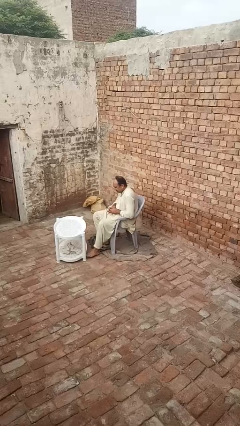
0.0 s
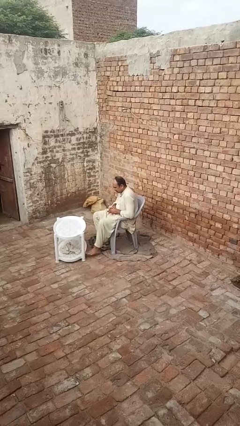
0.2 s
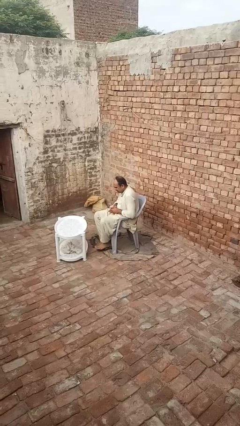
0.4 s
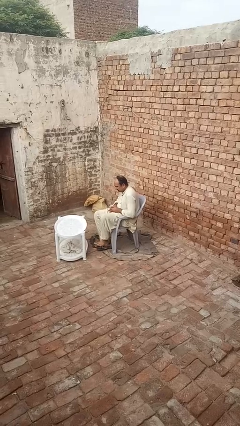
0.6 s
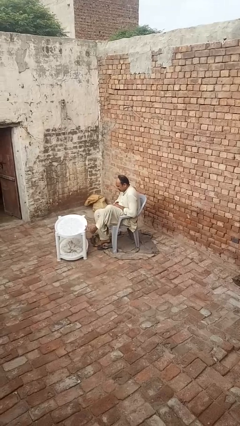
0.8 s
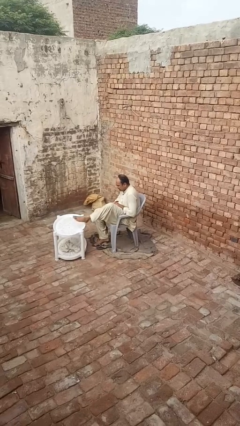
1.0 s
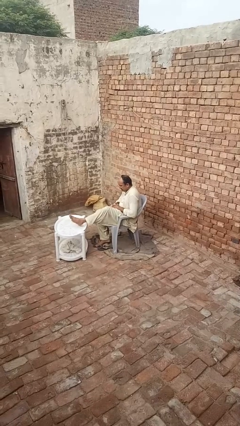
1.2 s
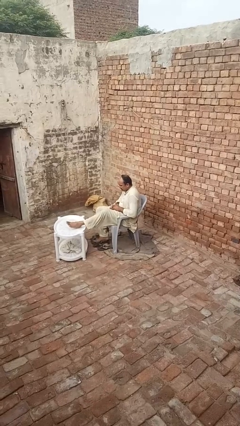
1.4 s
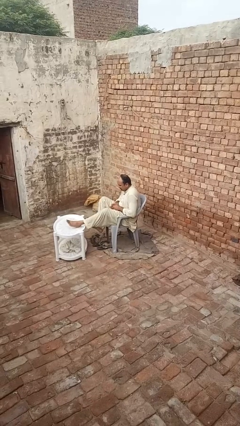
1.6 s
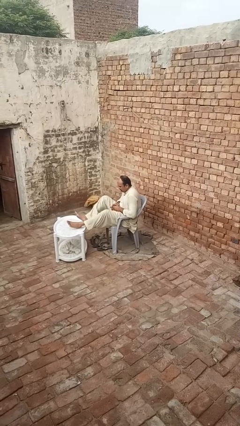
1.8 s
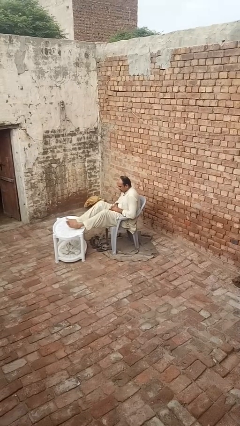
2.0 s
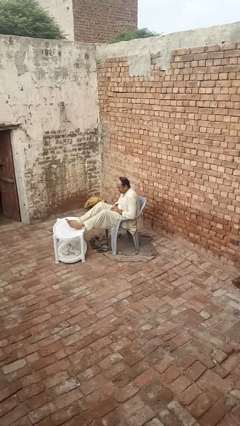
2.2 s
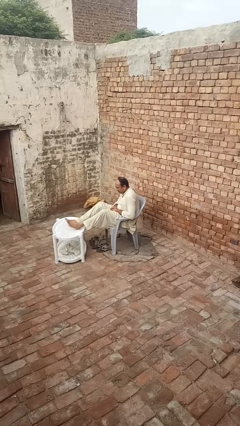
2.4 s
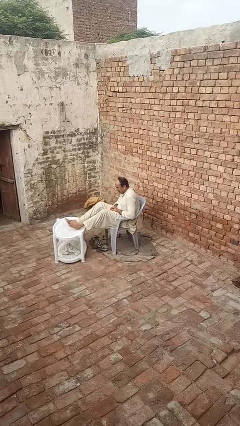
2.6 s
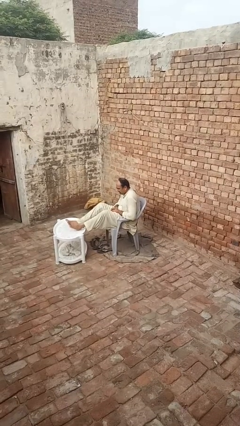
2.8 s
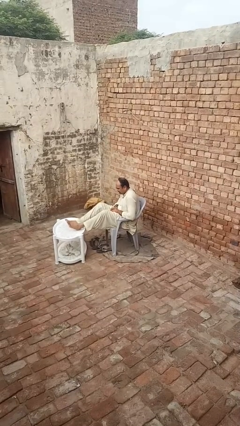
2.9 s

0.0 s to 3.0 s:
person puts feet up

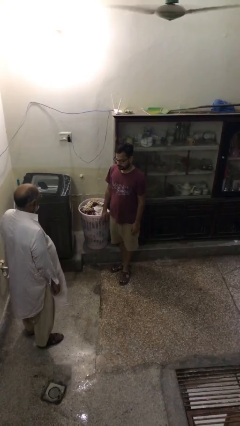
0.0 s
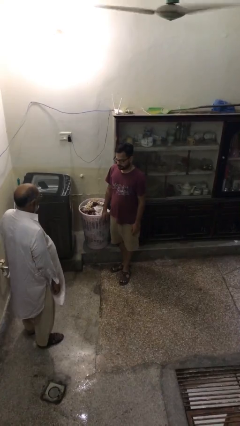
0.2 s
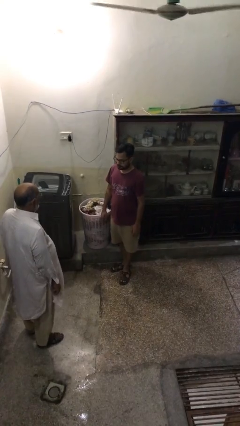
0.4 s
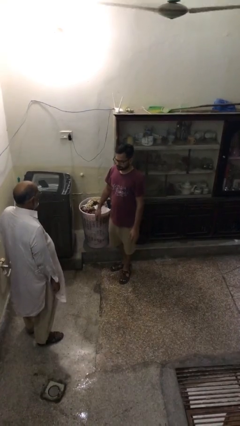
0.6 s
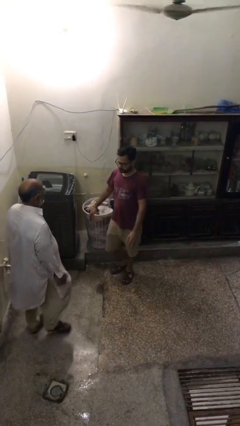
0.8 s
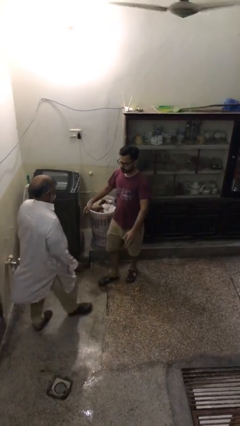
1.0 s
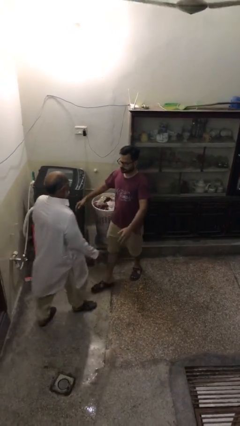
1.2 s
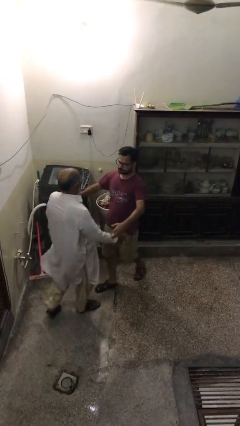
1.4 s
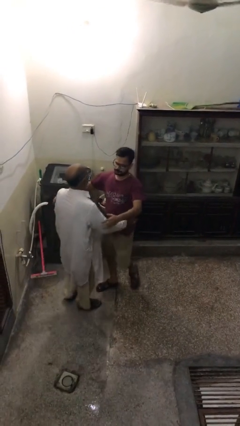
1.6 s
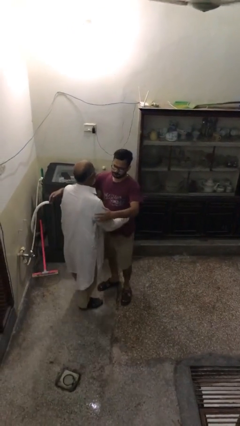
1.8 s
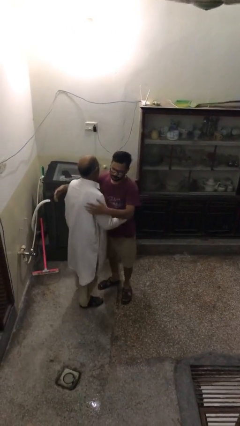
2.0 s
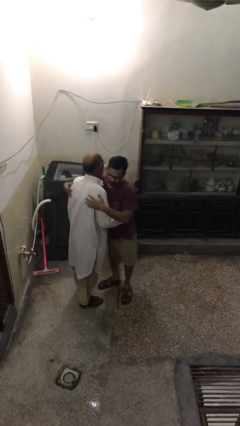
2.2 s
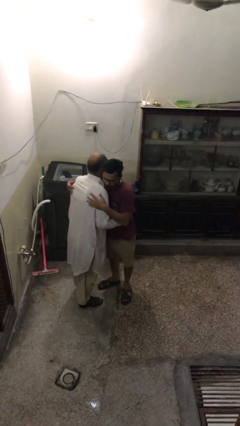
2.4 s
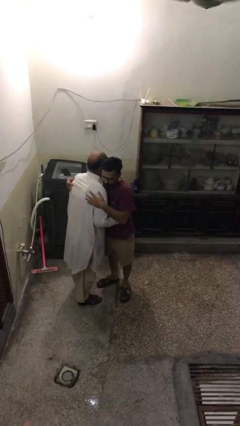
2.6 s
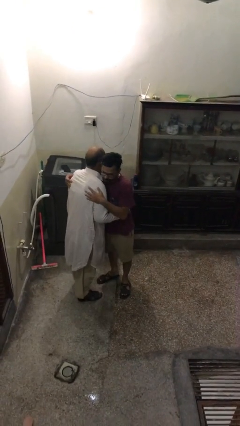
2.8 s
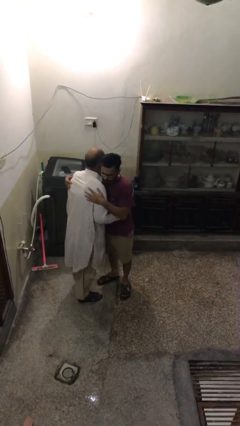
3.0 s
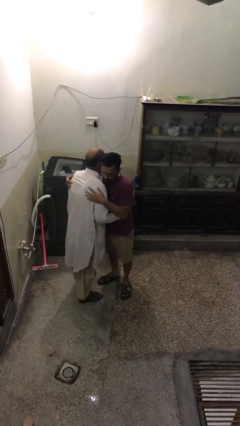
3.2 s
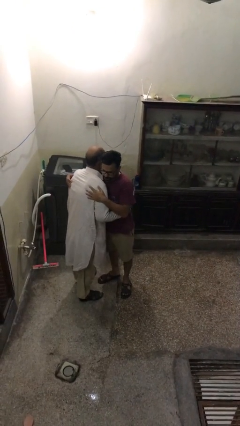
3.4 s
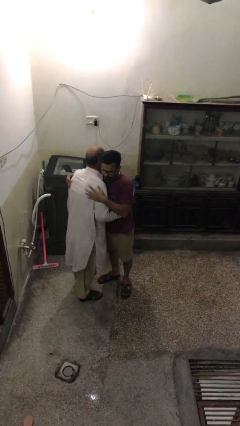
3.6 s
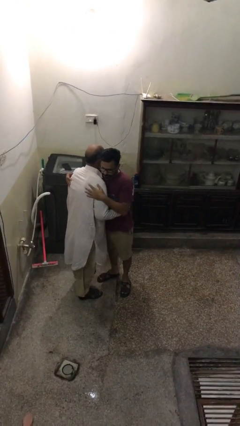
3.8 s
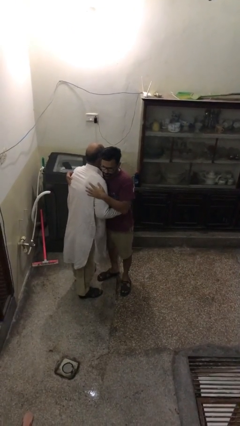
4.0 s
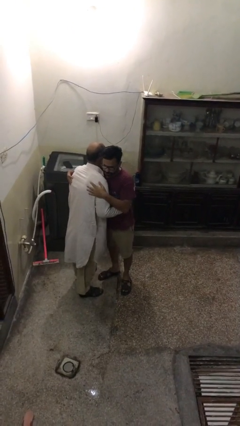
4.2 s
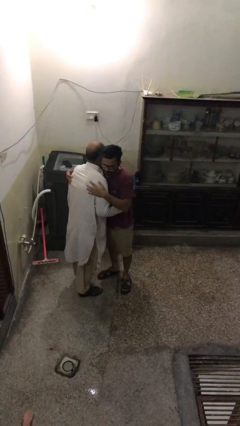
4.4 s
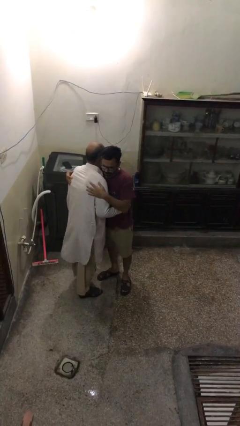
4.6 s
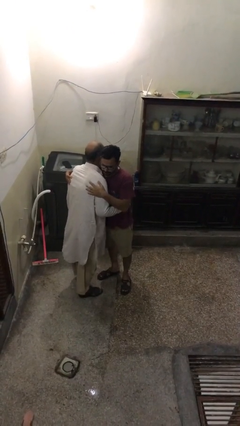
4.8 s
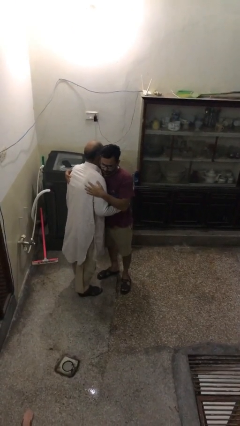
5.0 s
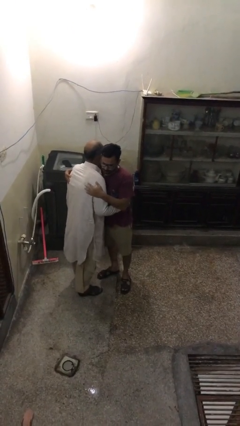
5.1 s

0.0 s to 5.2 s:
person embraces person

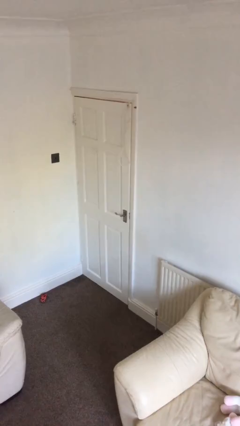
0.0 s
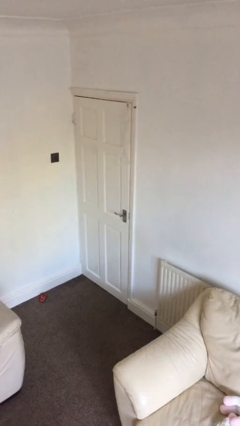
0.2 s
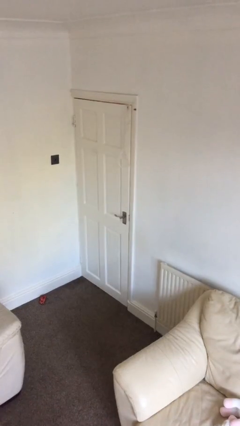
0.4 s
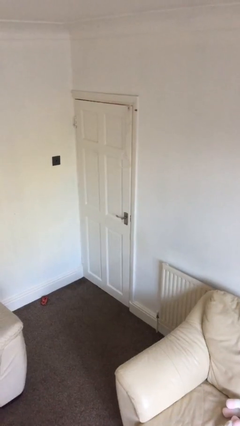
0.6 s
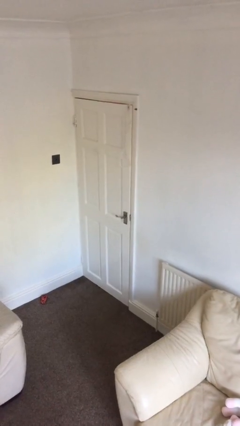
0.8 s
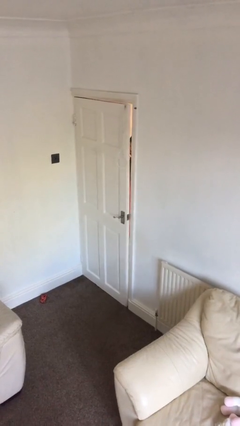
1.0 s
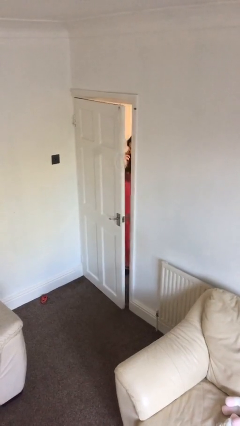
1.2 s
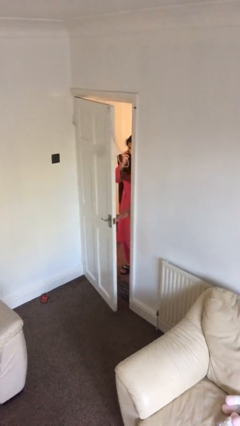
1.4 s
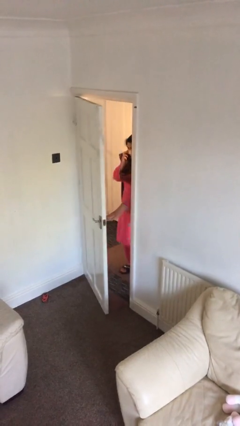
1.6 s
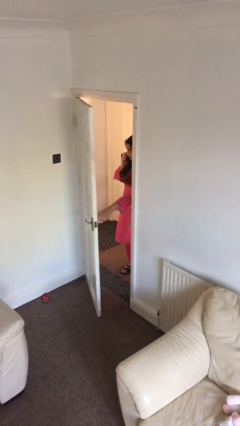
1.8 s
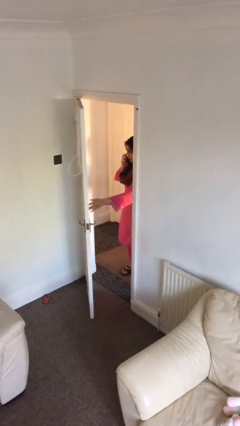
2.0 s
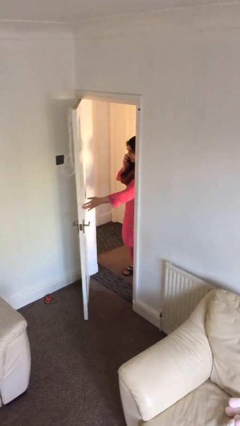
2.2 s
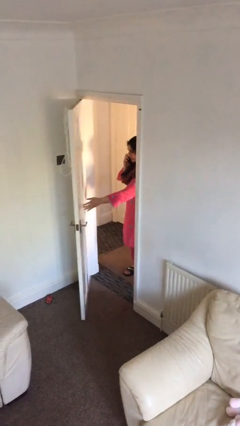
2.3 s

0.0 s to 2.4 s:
person opens facility door

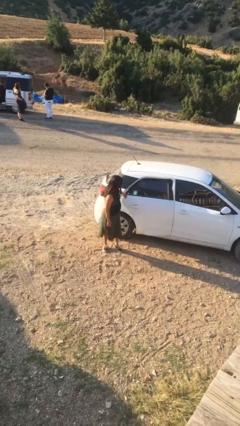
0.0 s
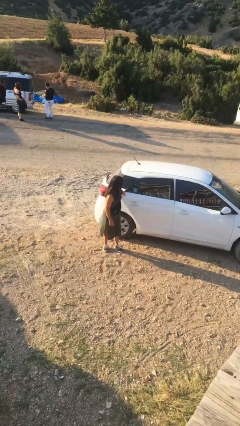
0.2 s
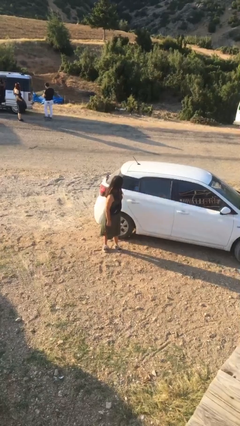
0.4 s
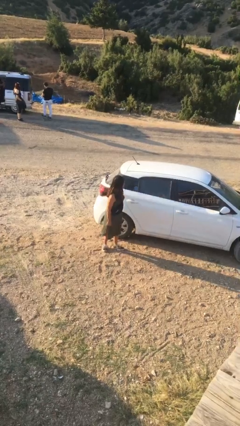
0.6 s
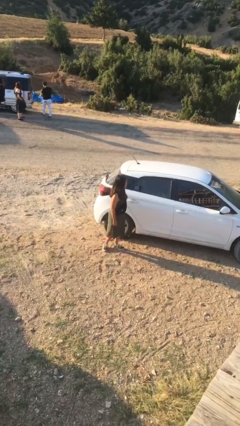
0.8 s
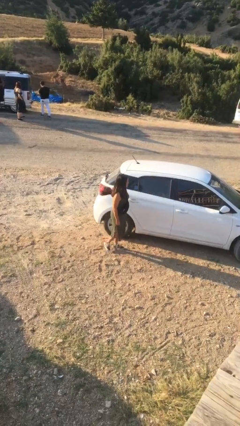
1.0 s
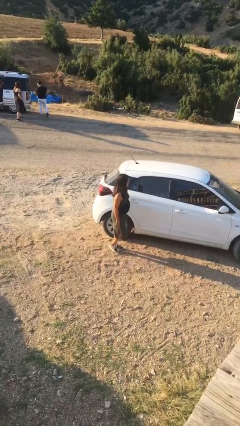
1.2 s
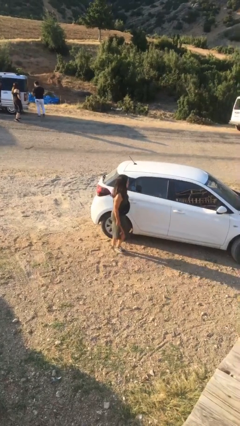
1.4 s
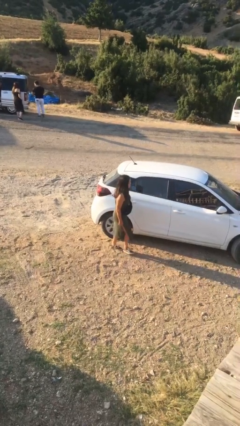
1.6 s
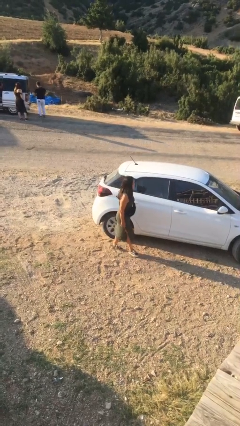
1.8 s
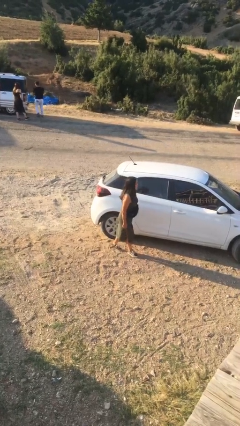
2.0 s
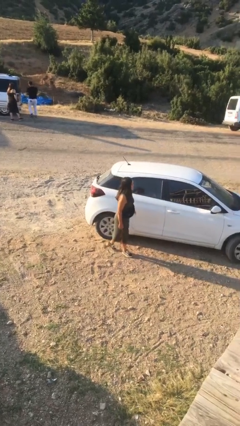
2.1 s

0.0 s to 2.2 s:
person closes car door

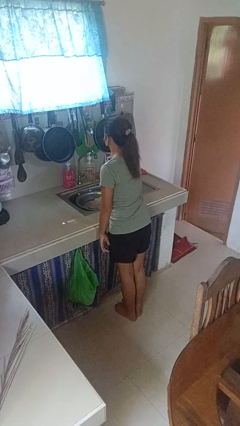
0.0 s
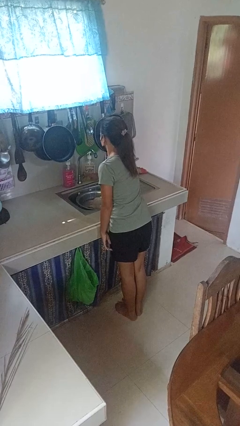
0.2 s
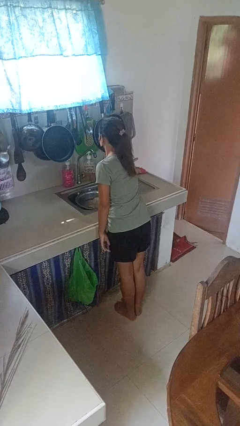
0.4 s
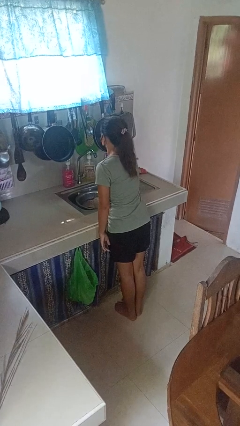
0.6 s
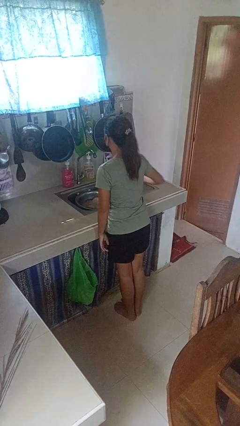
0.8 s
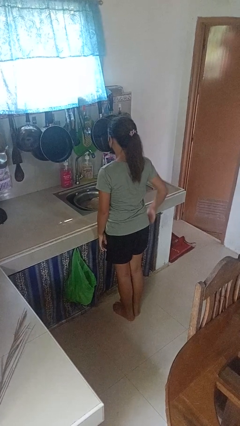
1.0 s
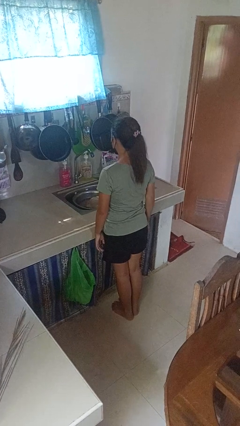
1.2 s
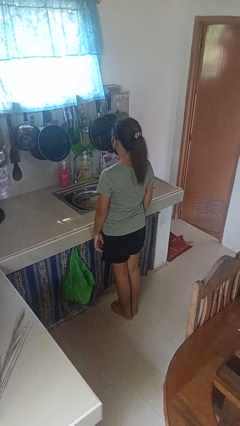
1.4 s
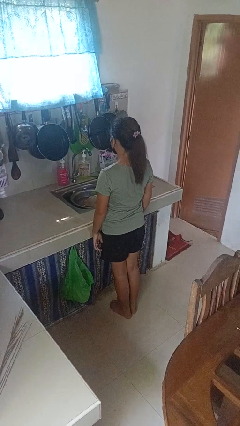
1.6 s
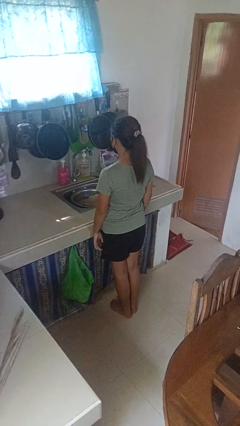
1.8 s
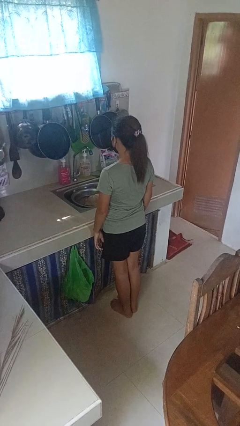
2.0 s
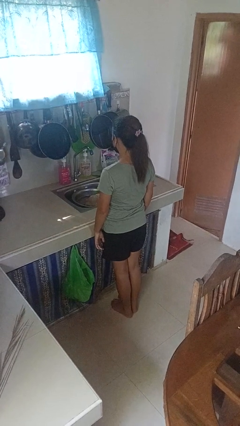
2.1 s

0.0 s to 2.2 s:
person turns off faucet

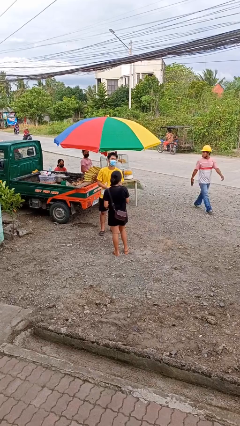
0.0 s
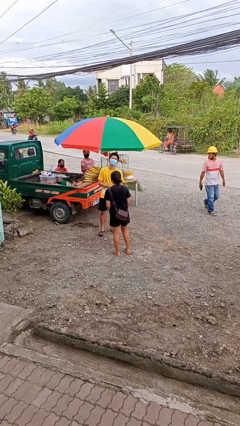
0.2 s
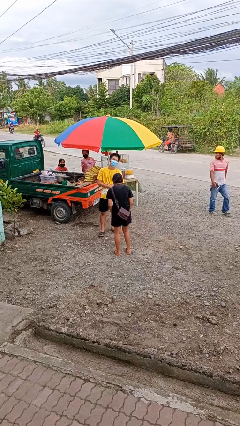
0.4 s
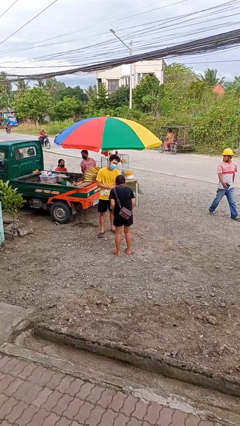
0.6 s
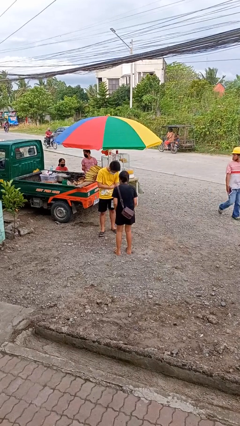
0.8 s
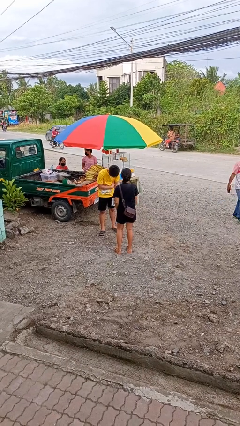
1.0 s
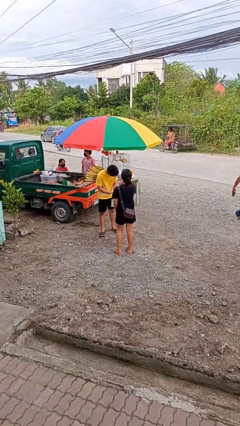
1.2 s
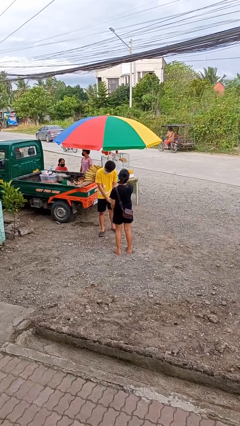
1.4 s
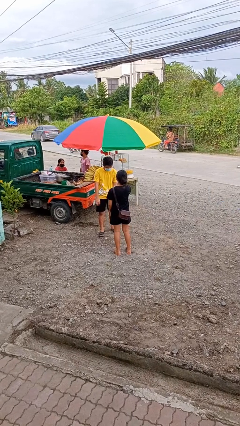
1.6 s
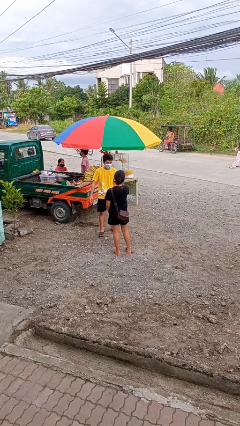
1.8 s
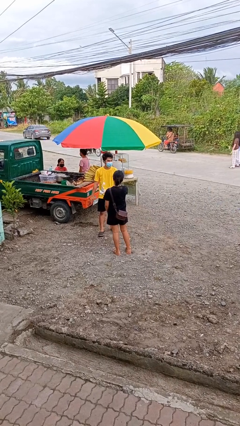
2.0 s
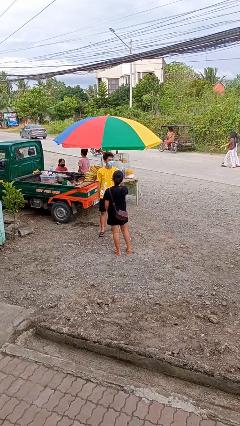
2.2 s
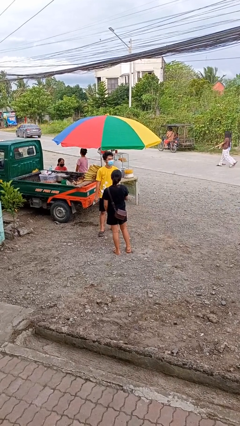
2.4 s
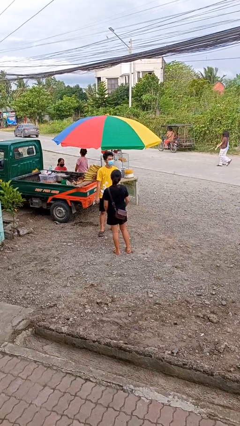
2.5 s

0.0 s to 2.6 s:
person laughs with person
